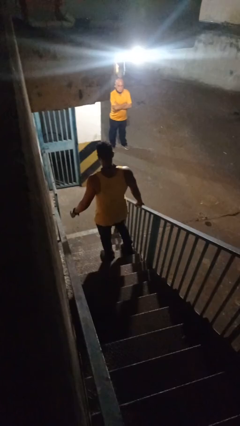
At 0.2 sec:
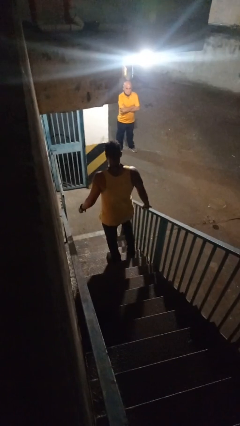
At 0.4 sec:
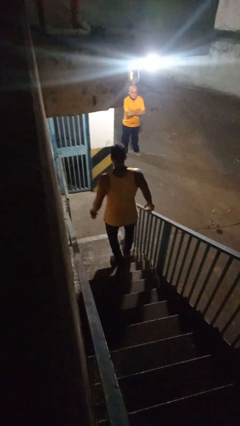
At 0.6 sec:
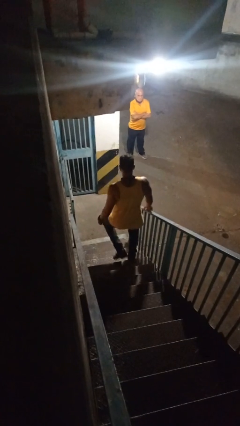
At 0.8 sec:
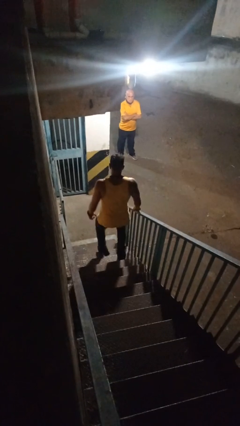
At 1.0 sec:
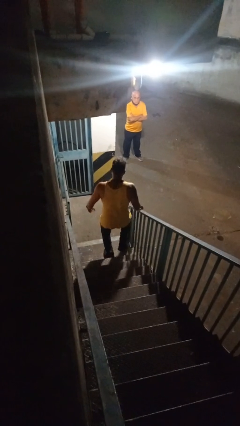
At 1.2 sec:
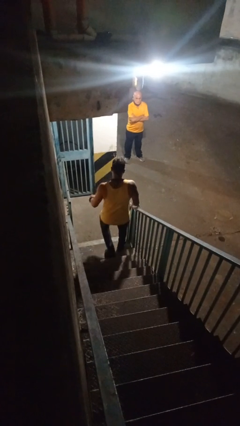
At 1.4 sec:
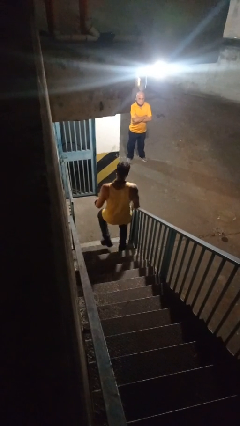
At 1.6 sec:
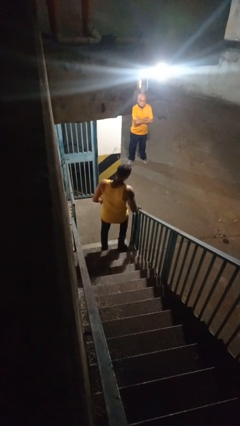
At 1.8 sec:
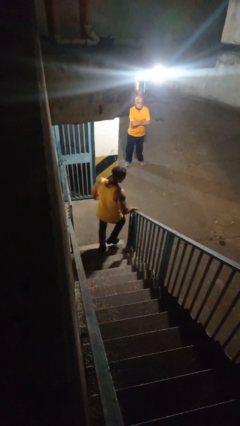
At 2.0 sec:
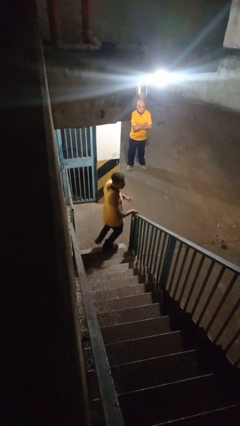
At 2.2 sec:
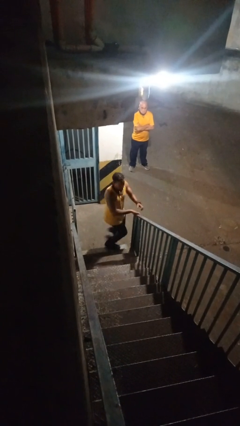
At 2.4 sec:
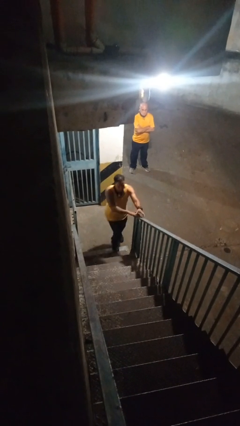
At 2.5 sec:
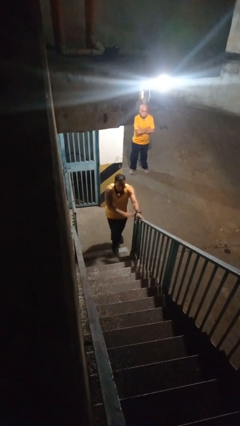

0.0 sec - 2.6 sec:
person climbs down stairs

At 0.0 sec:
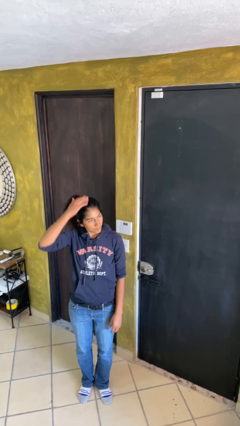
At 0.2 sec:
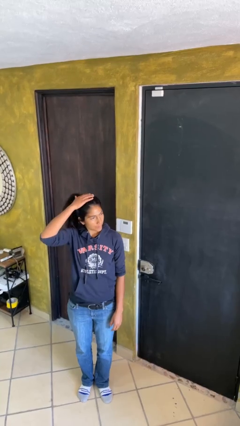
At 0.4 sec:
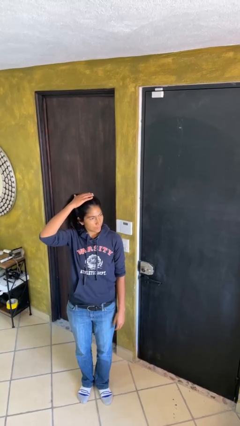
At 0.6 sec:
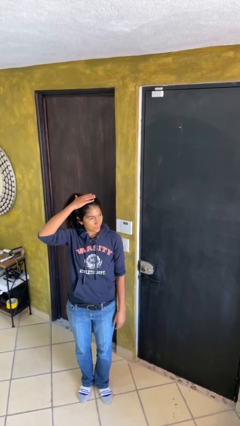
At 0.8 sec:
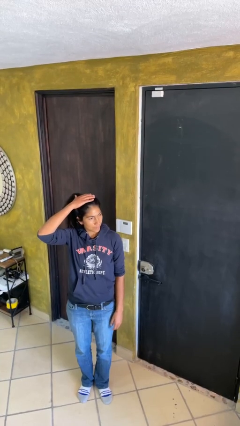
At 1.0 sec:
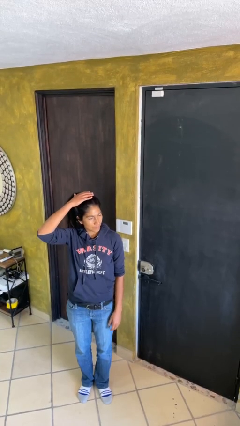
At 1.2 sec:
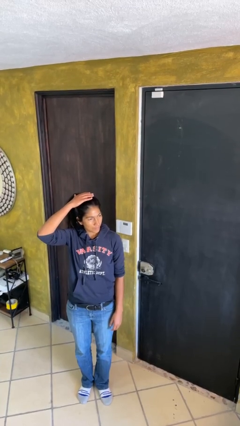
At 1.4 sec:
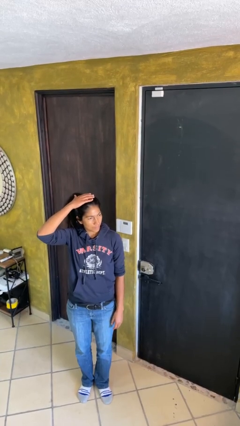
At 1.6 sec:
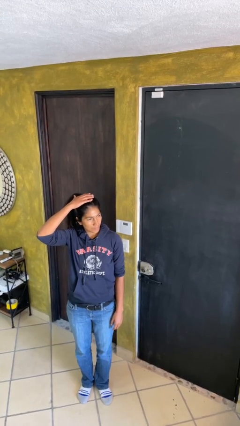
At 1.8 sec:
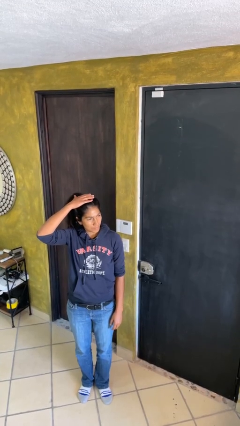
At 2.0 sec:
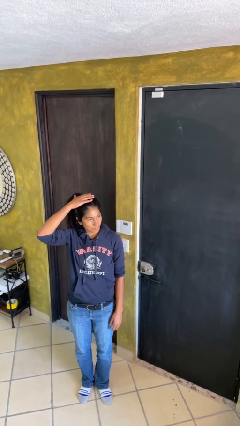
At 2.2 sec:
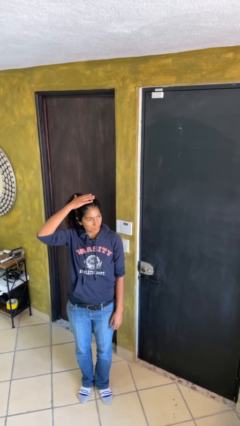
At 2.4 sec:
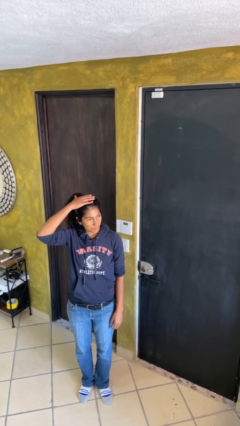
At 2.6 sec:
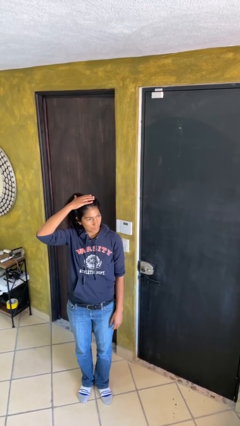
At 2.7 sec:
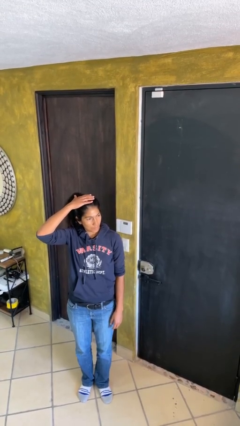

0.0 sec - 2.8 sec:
person pats head

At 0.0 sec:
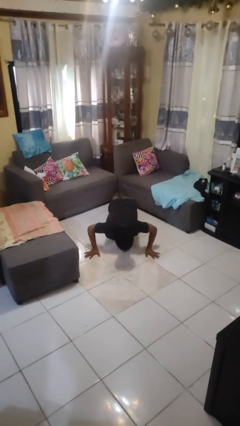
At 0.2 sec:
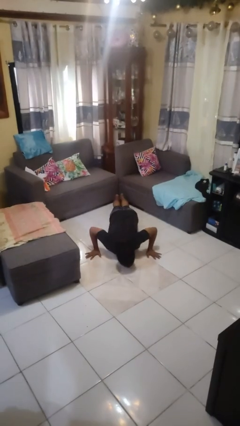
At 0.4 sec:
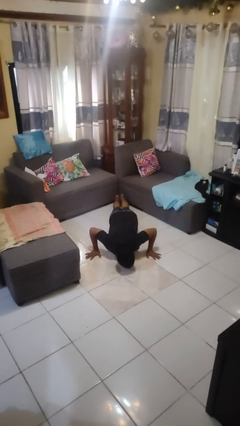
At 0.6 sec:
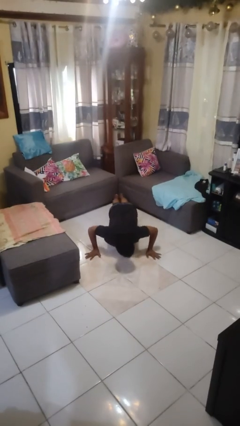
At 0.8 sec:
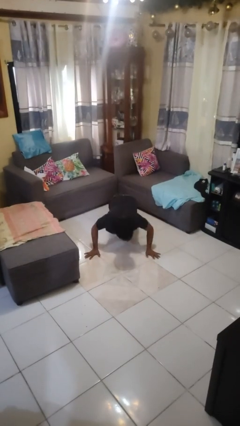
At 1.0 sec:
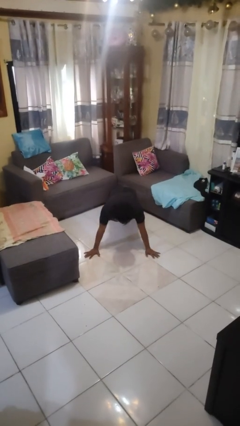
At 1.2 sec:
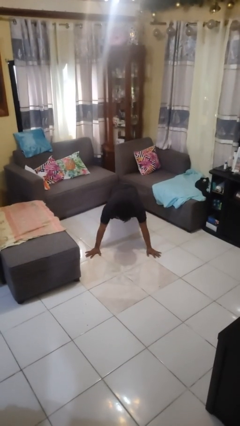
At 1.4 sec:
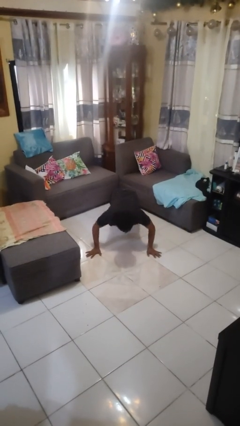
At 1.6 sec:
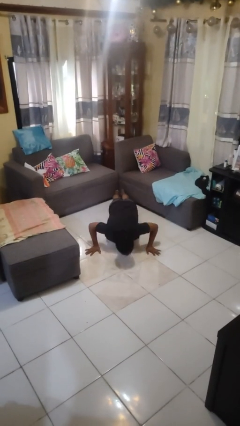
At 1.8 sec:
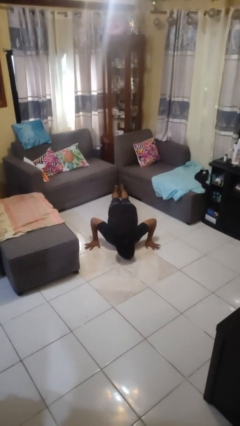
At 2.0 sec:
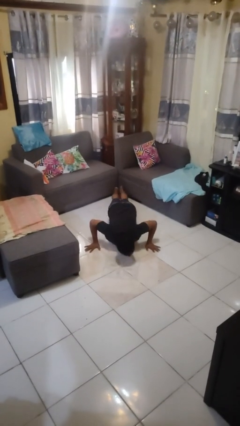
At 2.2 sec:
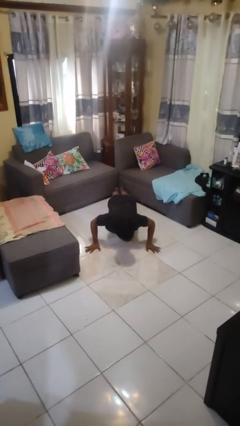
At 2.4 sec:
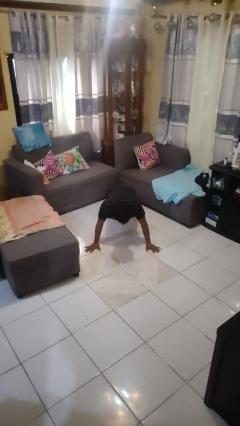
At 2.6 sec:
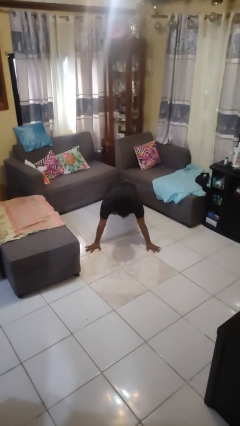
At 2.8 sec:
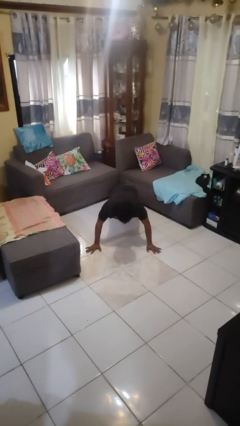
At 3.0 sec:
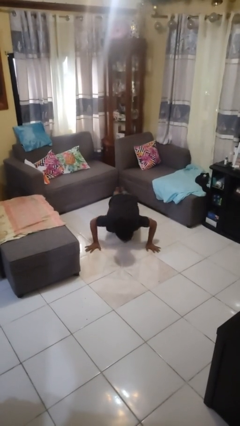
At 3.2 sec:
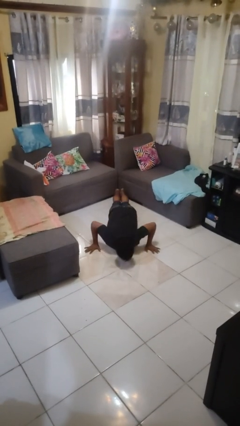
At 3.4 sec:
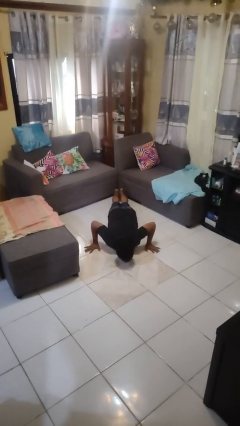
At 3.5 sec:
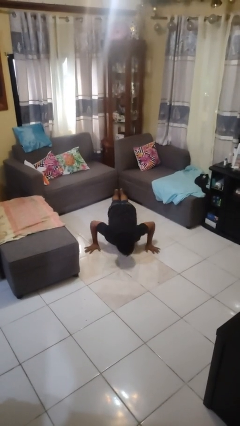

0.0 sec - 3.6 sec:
person exercises with pushup

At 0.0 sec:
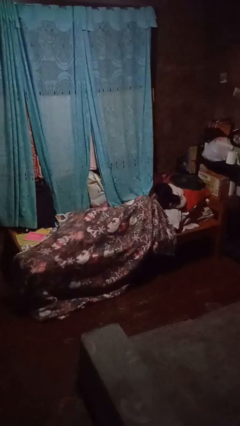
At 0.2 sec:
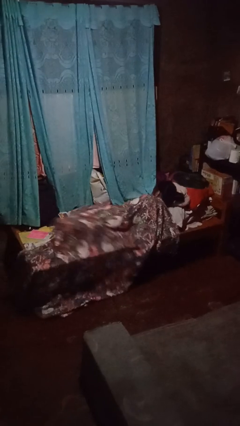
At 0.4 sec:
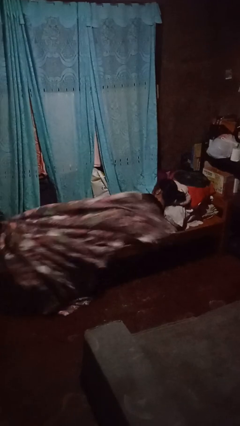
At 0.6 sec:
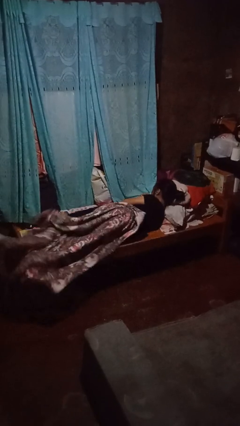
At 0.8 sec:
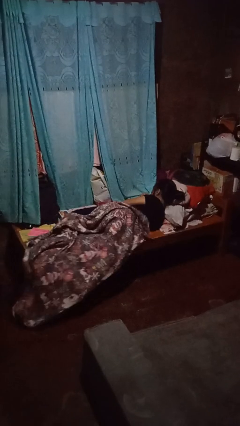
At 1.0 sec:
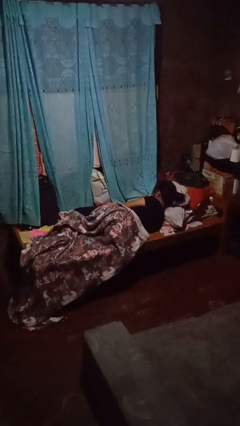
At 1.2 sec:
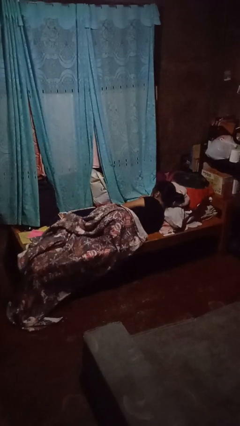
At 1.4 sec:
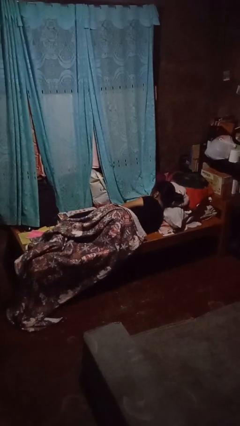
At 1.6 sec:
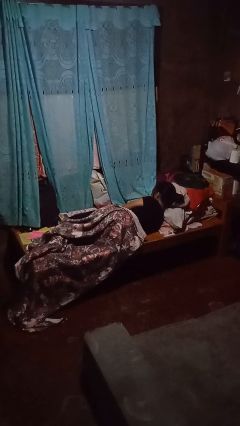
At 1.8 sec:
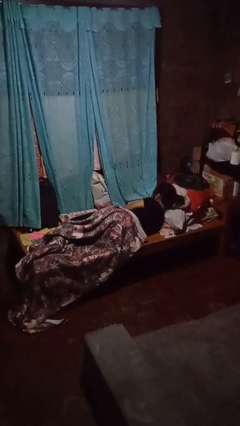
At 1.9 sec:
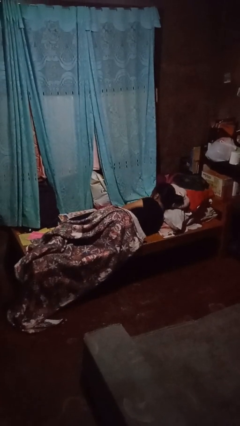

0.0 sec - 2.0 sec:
person uncovers with bedsheets

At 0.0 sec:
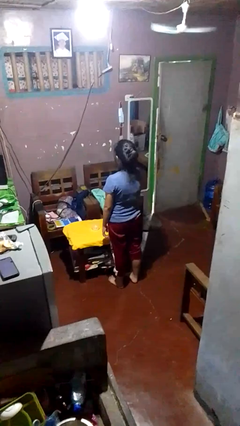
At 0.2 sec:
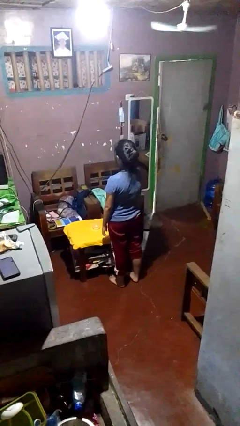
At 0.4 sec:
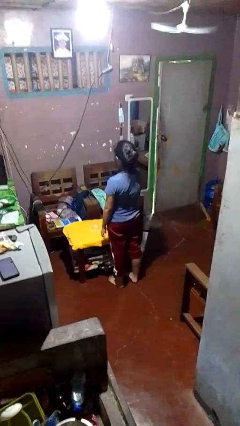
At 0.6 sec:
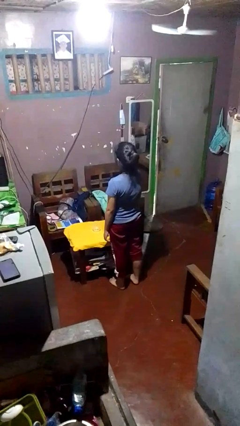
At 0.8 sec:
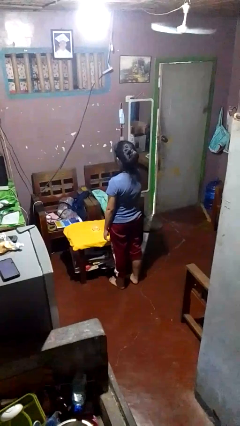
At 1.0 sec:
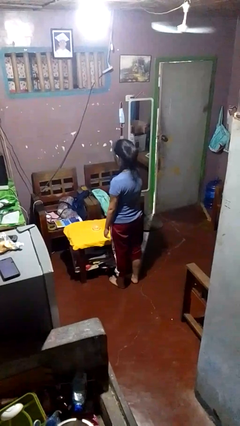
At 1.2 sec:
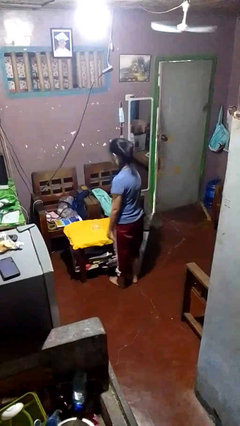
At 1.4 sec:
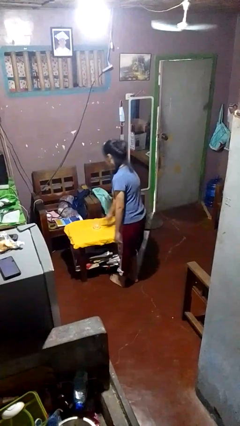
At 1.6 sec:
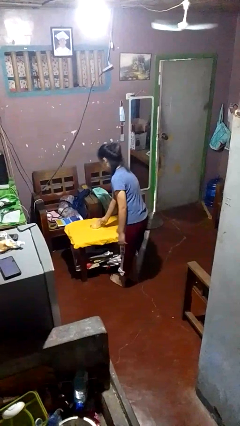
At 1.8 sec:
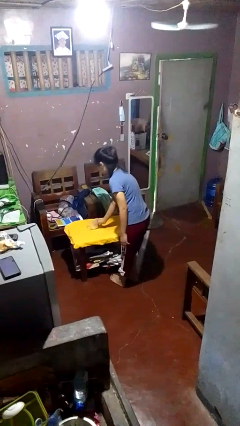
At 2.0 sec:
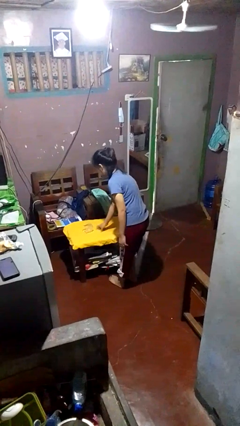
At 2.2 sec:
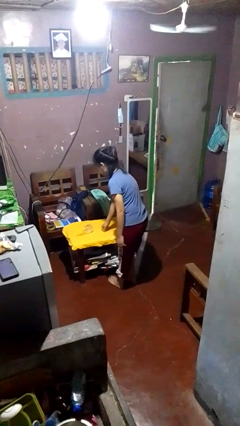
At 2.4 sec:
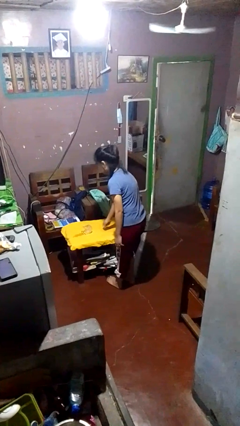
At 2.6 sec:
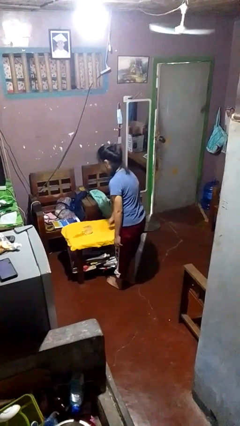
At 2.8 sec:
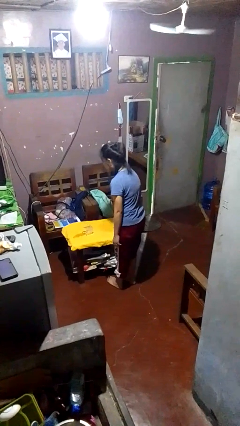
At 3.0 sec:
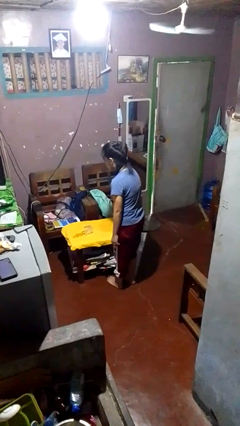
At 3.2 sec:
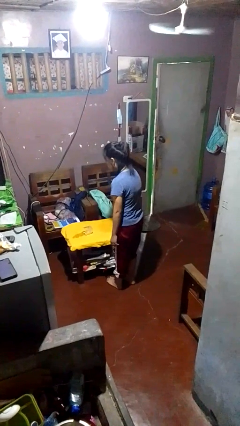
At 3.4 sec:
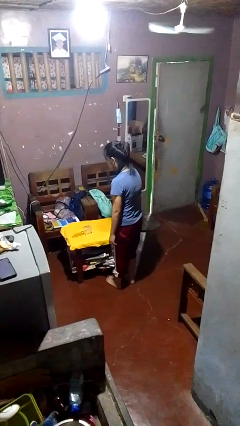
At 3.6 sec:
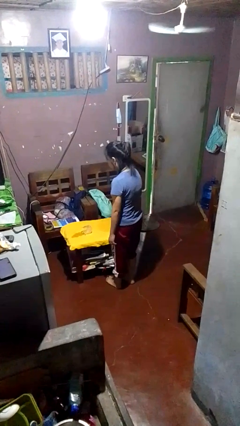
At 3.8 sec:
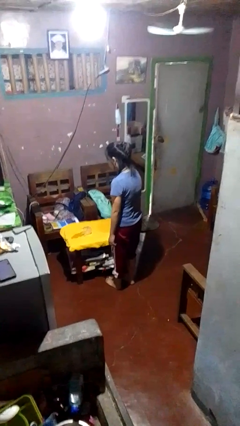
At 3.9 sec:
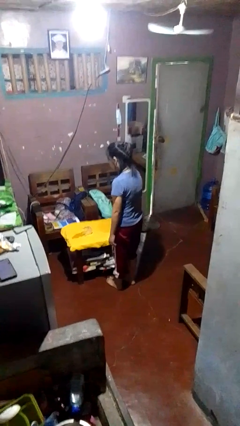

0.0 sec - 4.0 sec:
person spills on table

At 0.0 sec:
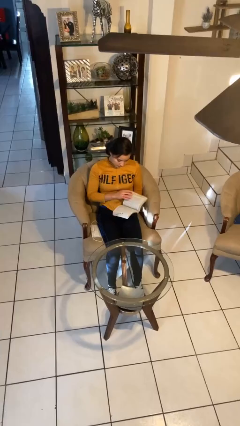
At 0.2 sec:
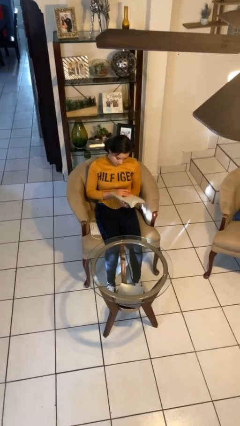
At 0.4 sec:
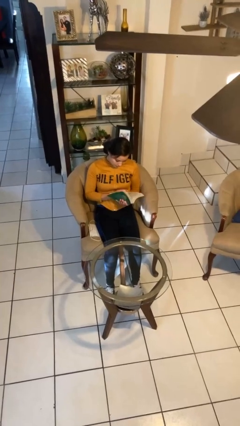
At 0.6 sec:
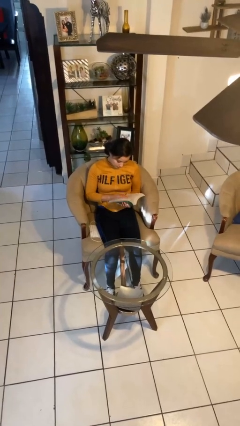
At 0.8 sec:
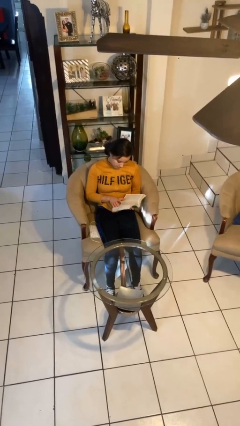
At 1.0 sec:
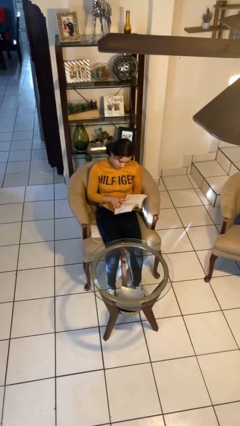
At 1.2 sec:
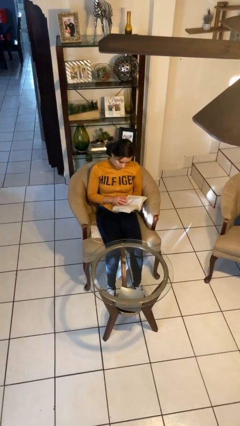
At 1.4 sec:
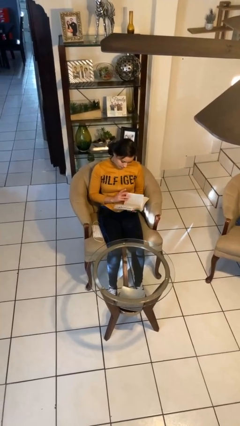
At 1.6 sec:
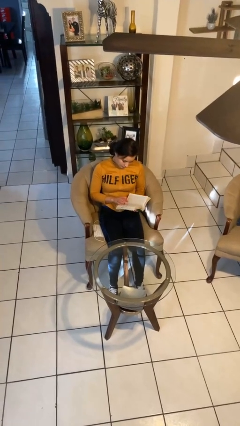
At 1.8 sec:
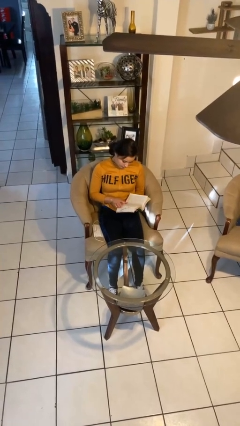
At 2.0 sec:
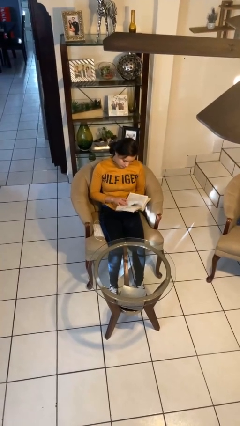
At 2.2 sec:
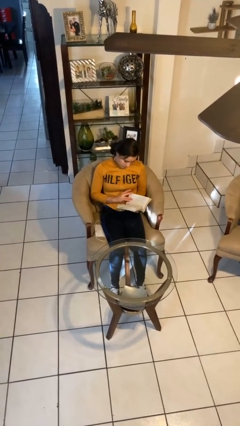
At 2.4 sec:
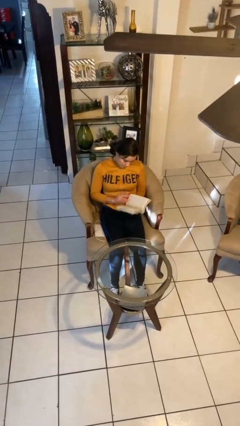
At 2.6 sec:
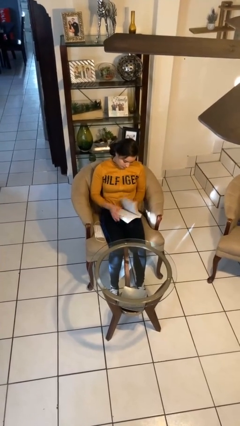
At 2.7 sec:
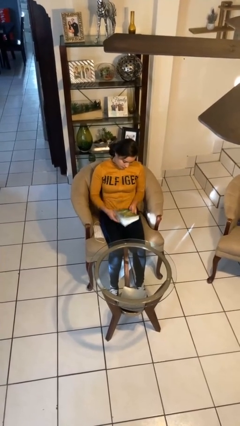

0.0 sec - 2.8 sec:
person reads book
